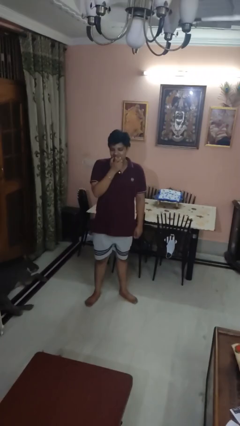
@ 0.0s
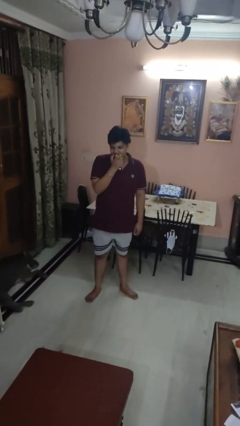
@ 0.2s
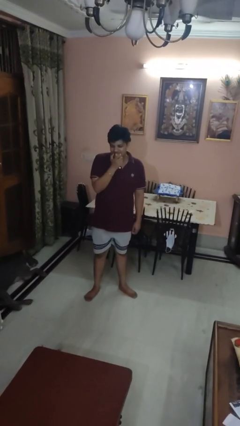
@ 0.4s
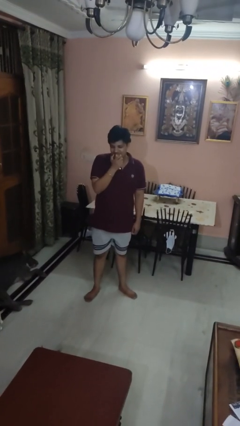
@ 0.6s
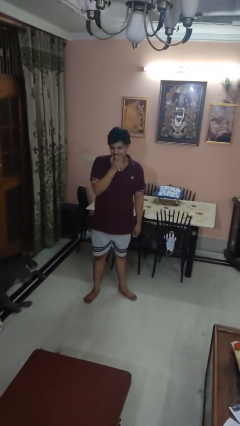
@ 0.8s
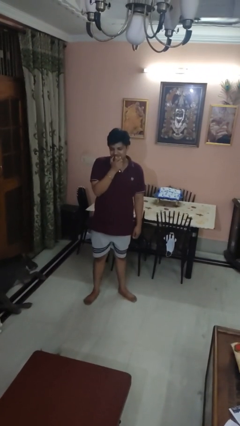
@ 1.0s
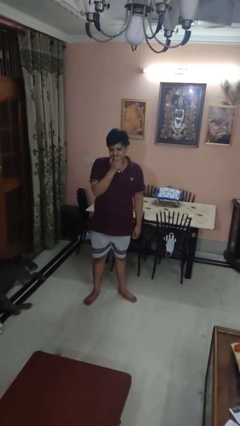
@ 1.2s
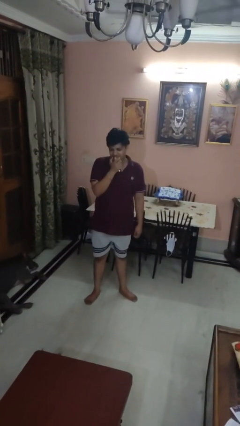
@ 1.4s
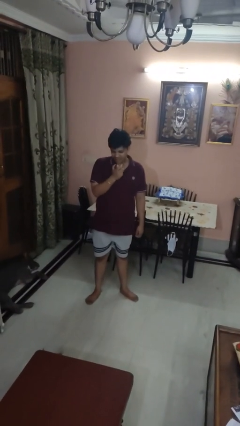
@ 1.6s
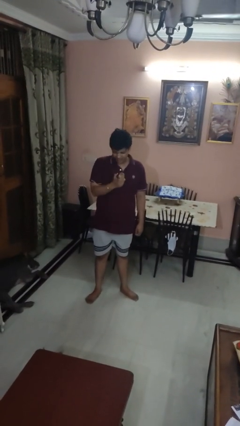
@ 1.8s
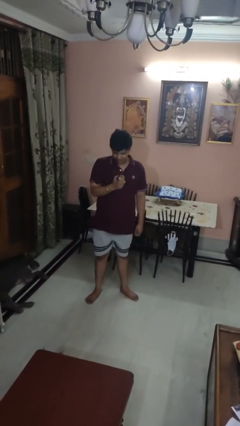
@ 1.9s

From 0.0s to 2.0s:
person eats apple

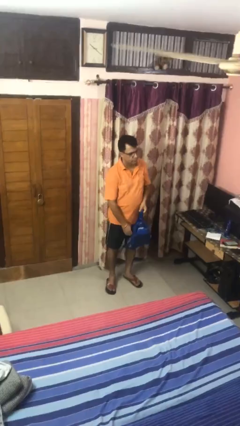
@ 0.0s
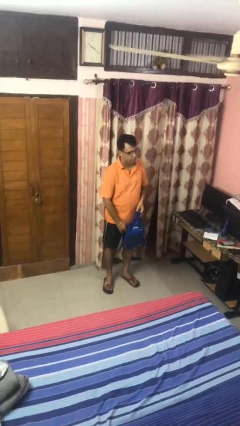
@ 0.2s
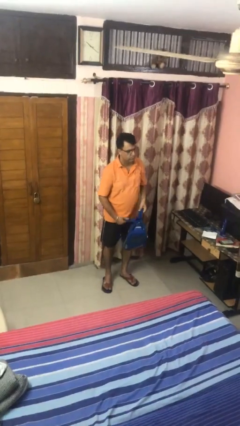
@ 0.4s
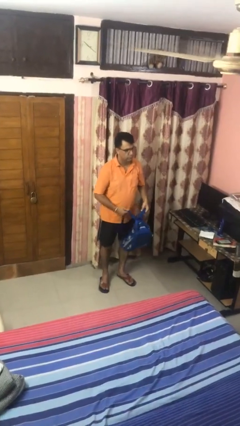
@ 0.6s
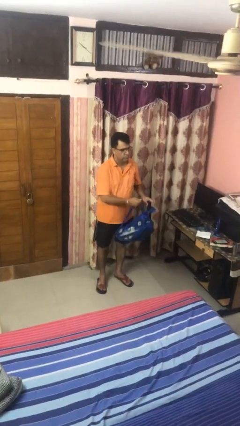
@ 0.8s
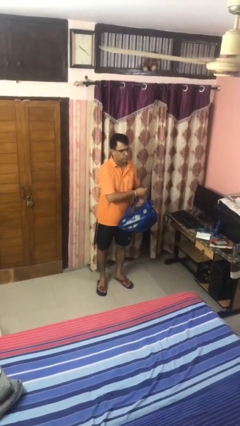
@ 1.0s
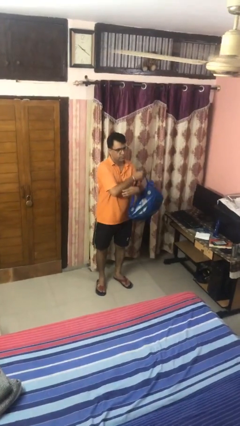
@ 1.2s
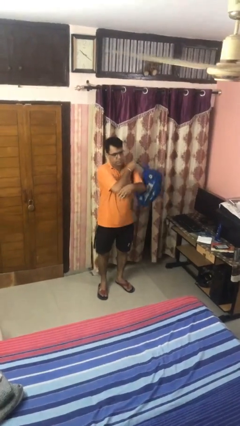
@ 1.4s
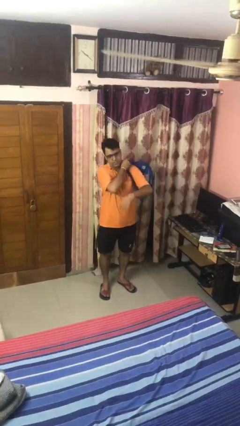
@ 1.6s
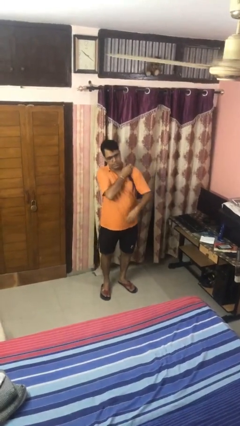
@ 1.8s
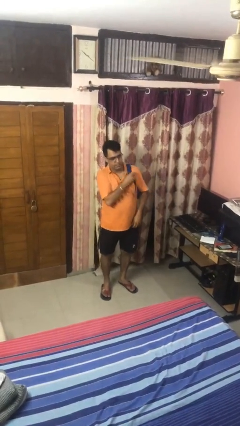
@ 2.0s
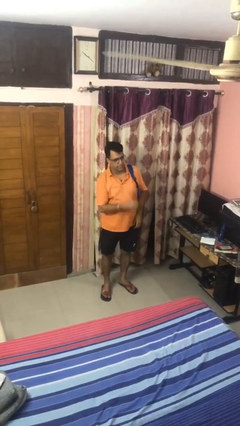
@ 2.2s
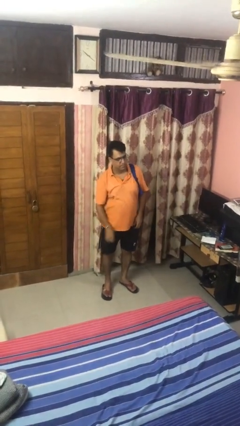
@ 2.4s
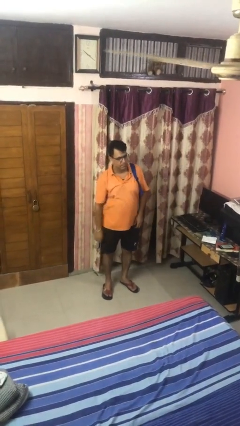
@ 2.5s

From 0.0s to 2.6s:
person puts on backpack

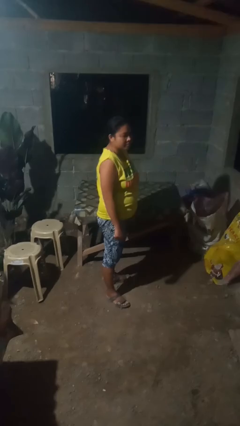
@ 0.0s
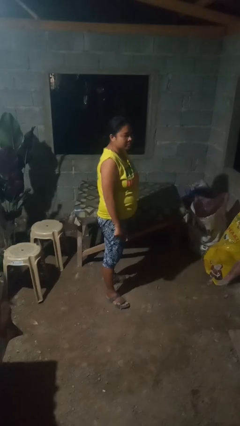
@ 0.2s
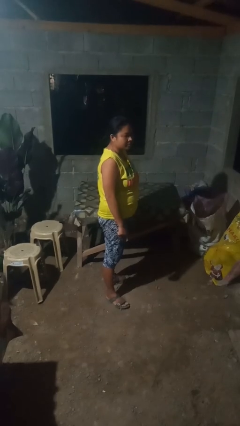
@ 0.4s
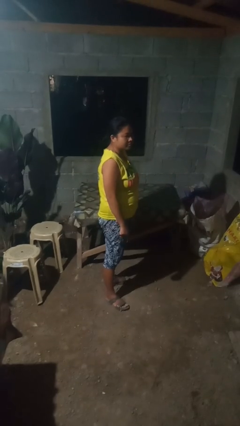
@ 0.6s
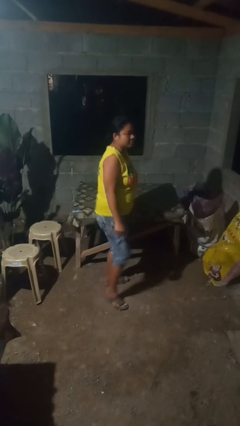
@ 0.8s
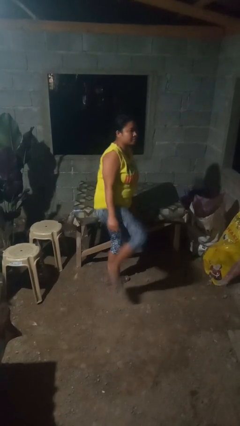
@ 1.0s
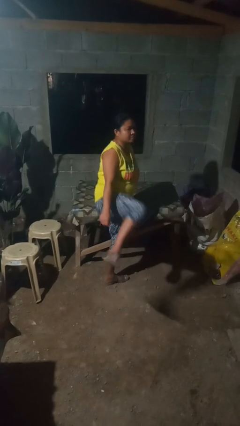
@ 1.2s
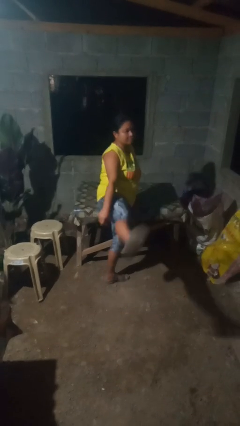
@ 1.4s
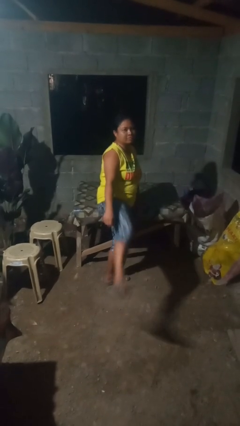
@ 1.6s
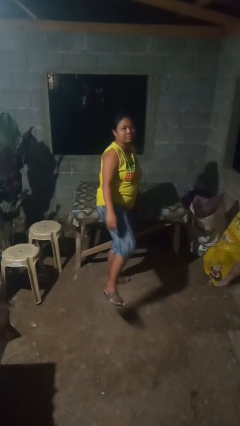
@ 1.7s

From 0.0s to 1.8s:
person karate kicks

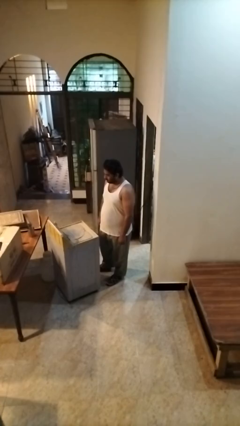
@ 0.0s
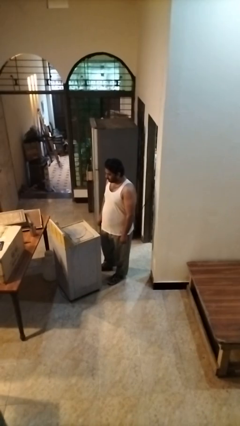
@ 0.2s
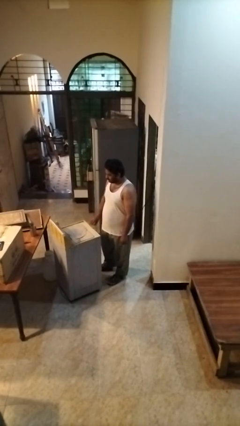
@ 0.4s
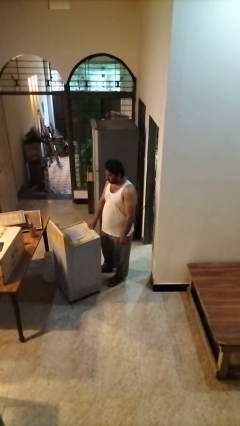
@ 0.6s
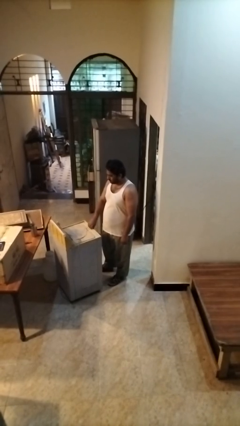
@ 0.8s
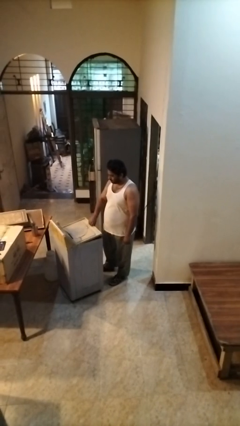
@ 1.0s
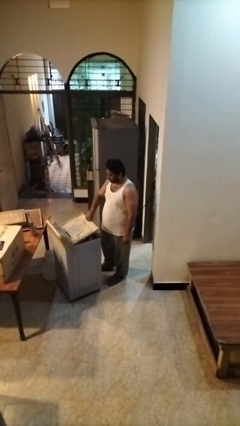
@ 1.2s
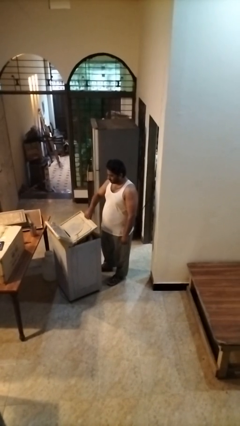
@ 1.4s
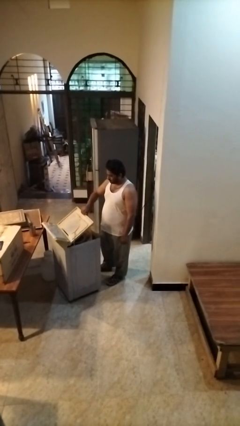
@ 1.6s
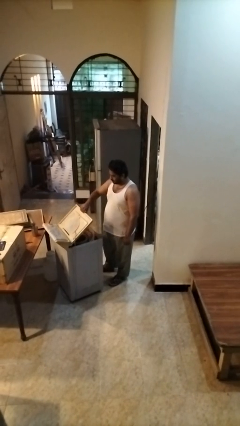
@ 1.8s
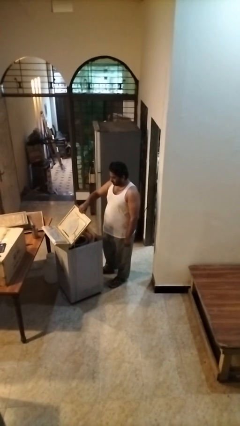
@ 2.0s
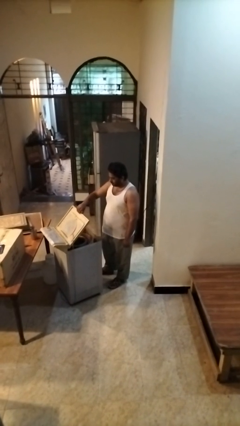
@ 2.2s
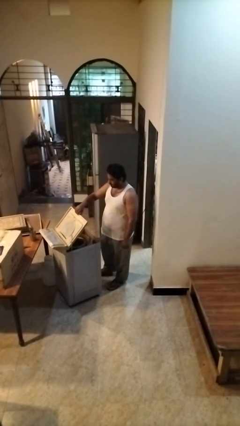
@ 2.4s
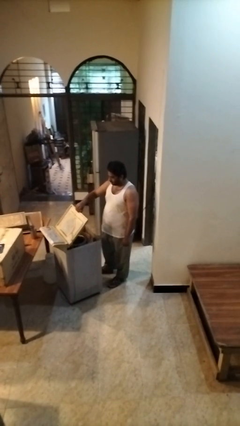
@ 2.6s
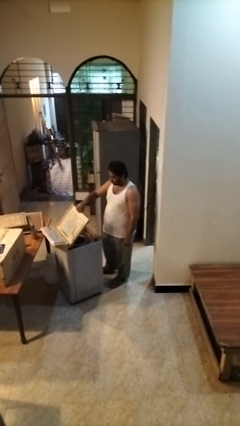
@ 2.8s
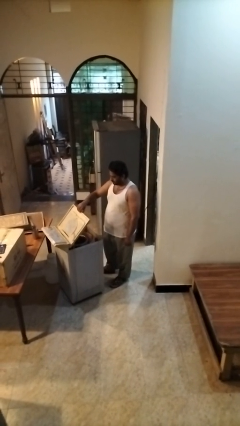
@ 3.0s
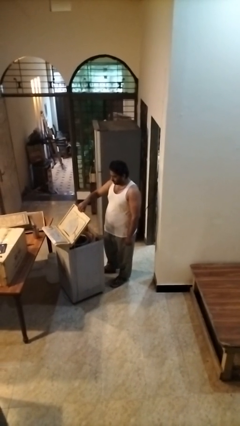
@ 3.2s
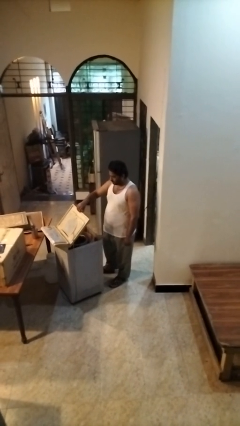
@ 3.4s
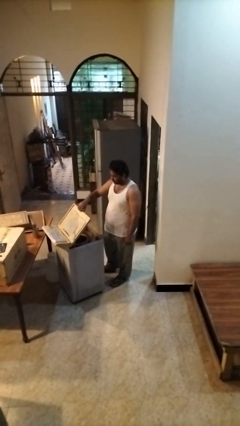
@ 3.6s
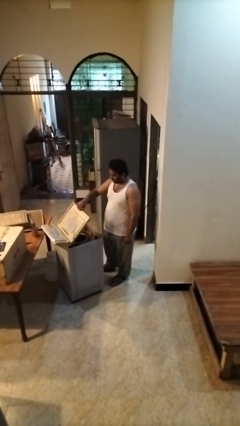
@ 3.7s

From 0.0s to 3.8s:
person opens clothes washer

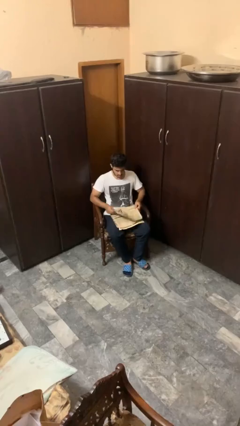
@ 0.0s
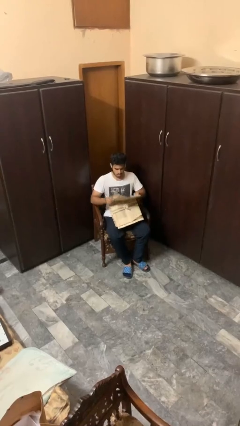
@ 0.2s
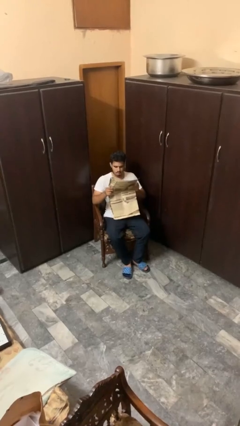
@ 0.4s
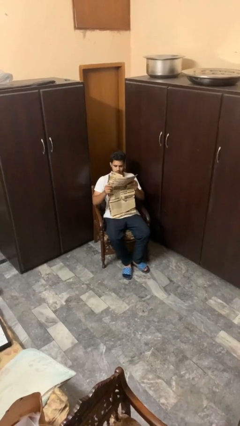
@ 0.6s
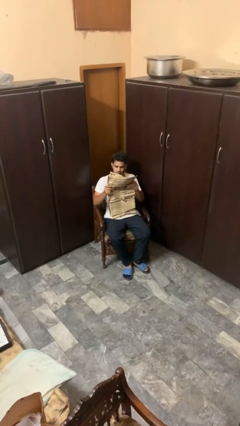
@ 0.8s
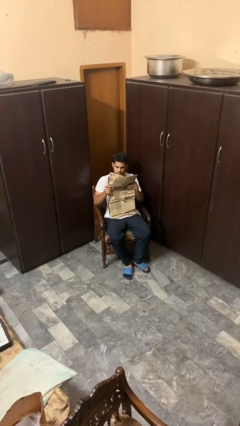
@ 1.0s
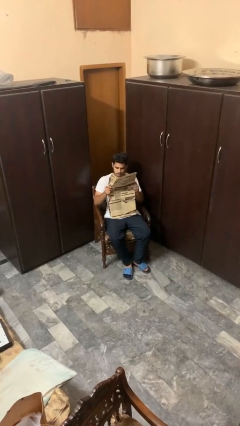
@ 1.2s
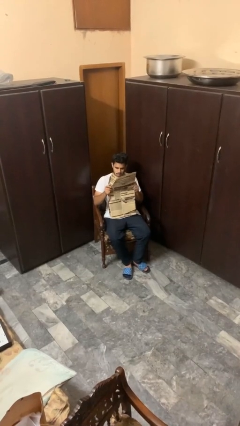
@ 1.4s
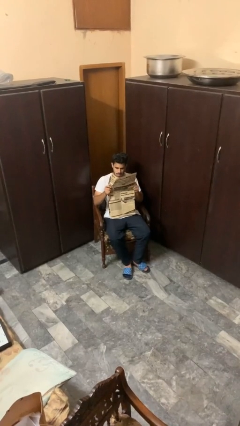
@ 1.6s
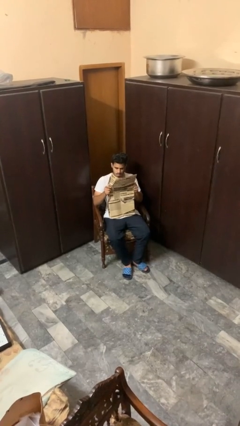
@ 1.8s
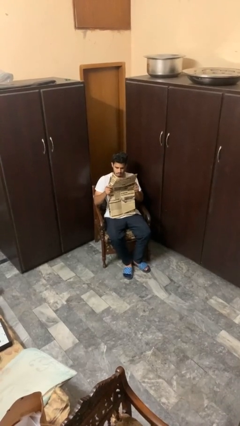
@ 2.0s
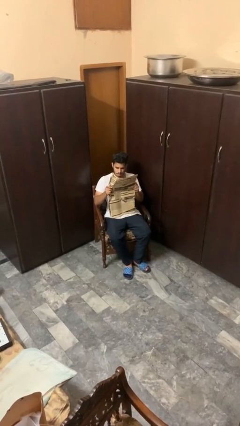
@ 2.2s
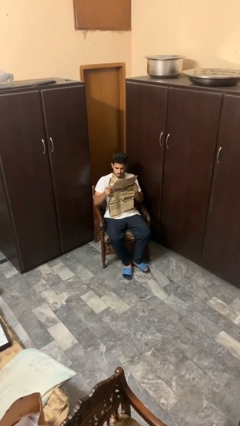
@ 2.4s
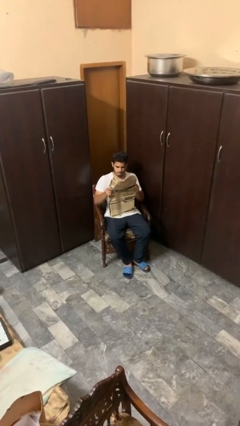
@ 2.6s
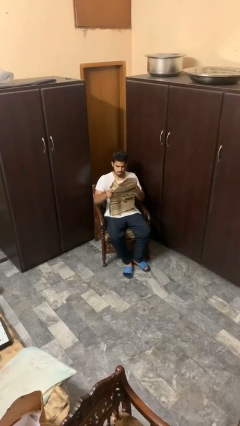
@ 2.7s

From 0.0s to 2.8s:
person reads newspaper

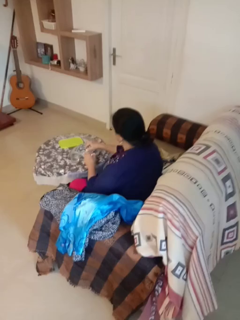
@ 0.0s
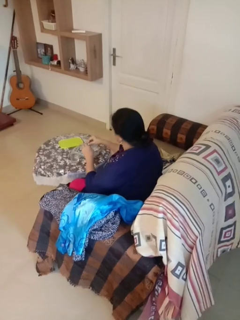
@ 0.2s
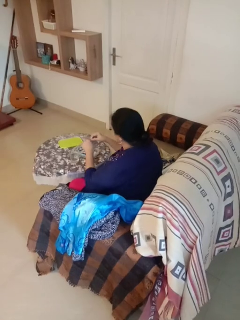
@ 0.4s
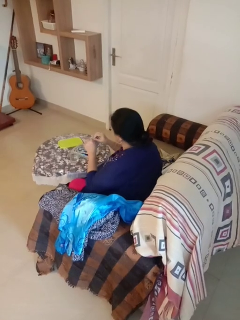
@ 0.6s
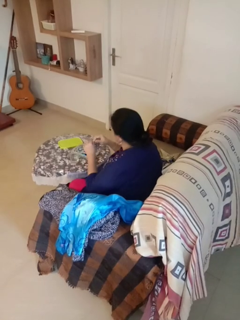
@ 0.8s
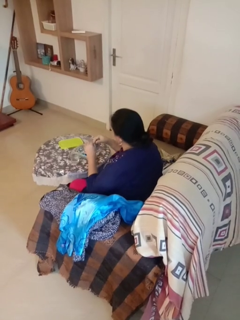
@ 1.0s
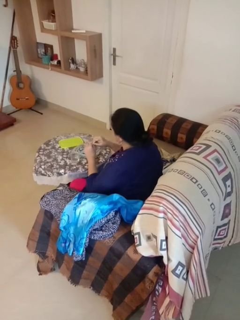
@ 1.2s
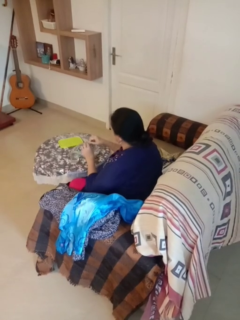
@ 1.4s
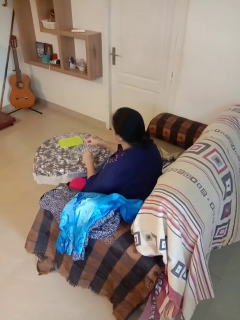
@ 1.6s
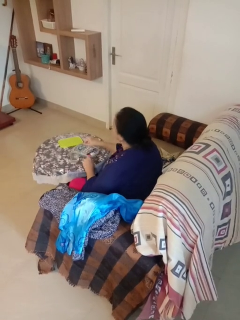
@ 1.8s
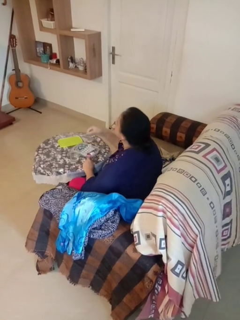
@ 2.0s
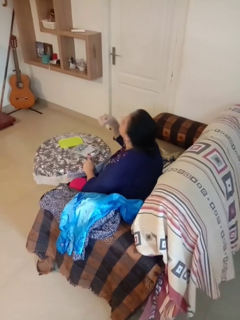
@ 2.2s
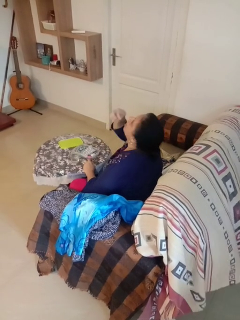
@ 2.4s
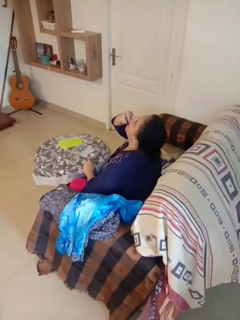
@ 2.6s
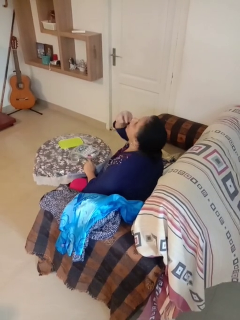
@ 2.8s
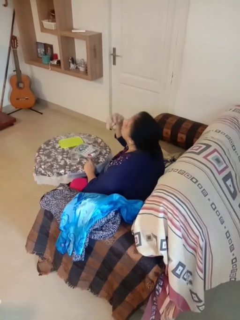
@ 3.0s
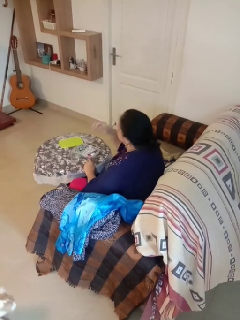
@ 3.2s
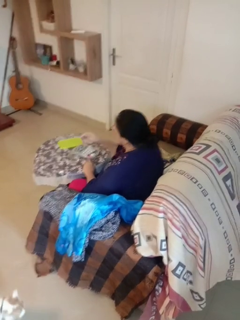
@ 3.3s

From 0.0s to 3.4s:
person takes medicine pills

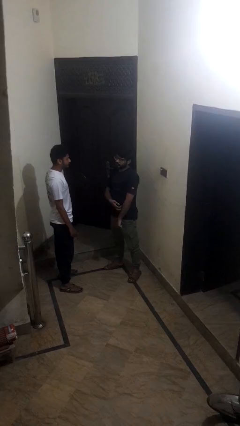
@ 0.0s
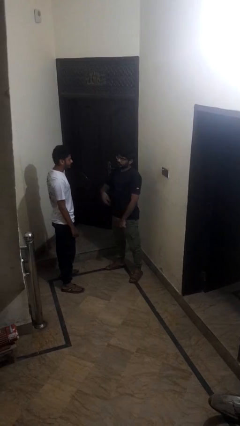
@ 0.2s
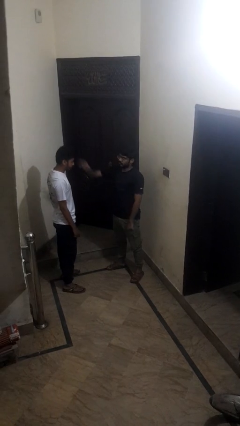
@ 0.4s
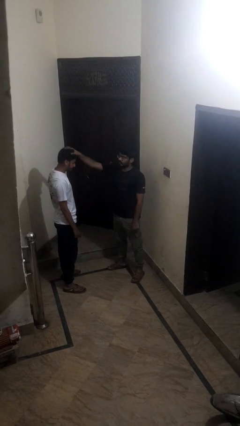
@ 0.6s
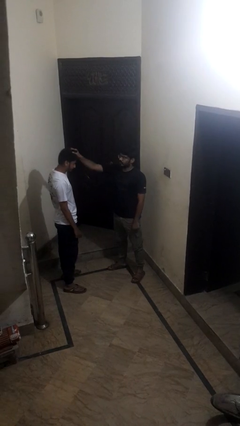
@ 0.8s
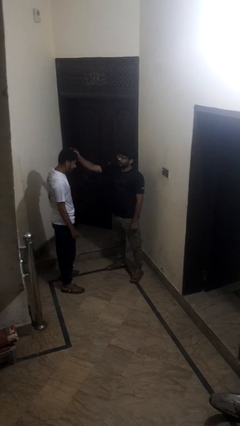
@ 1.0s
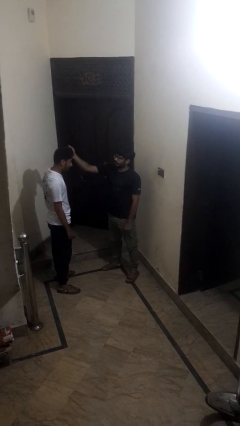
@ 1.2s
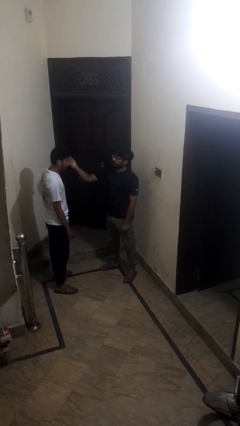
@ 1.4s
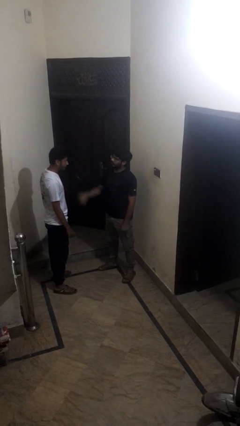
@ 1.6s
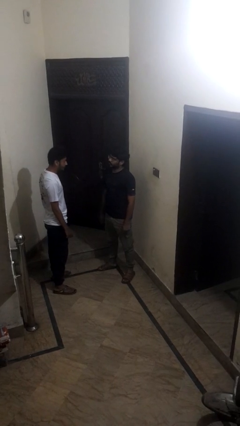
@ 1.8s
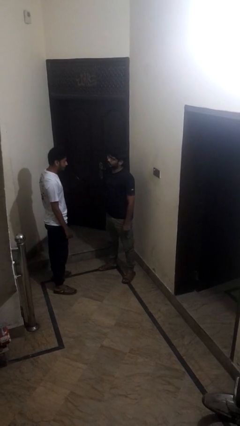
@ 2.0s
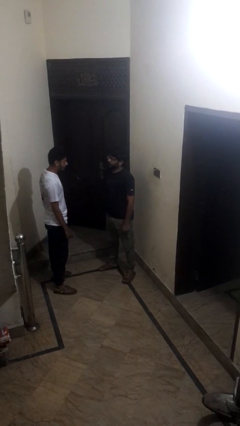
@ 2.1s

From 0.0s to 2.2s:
person grabs person by hair
